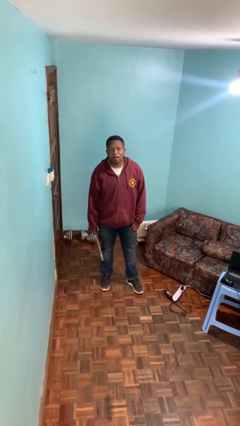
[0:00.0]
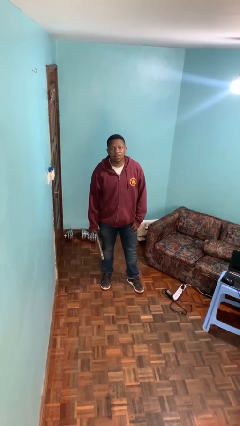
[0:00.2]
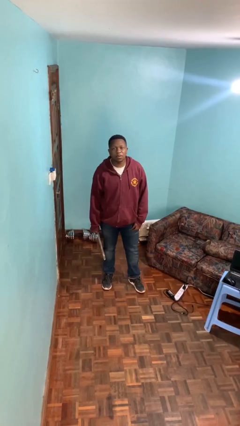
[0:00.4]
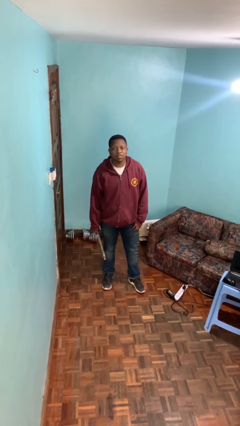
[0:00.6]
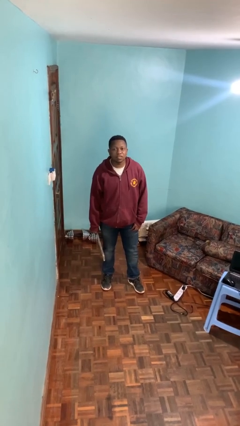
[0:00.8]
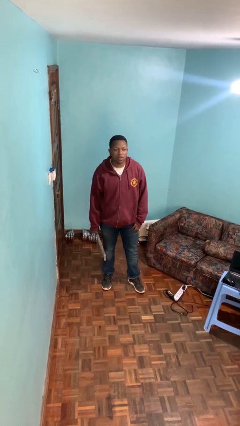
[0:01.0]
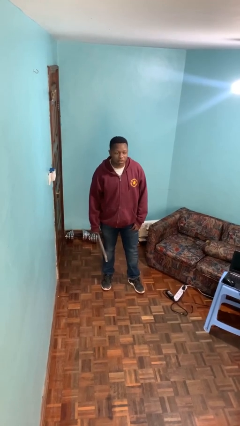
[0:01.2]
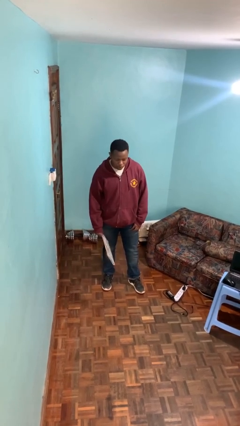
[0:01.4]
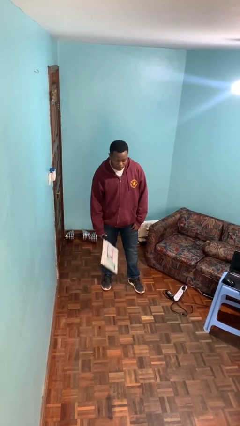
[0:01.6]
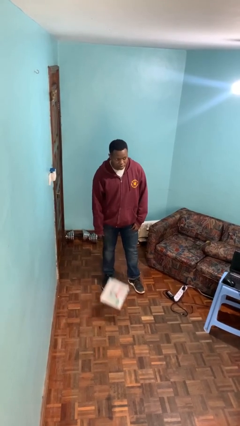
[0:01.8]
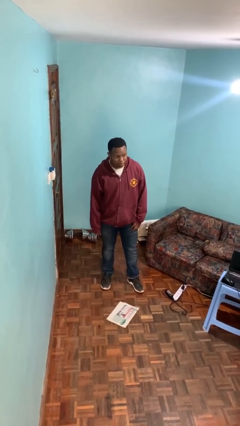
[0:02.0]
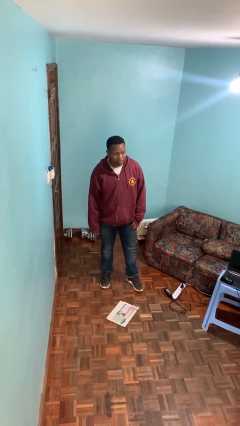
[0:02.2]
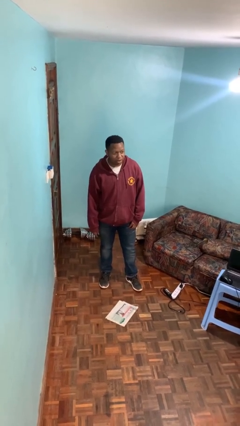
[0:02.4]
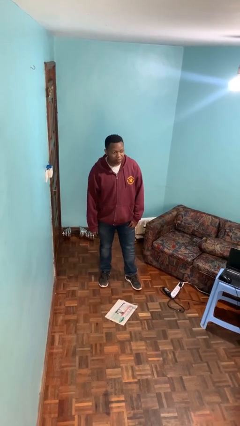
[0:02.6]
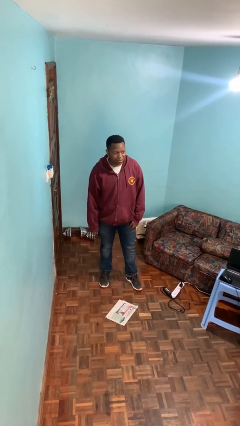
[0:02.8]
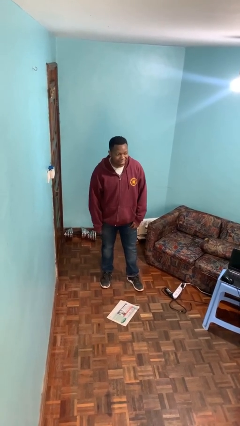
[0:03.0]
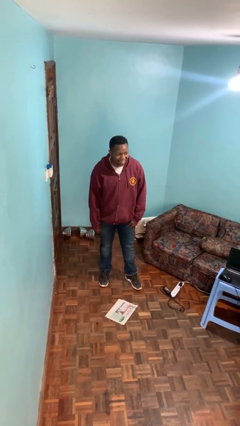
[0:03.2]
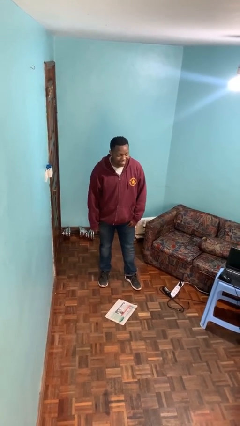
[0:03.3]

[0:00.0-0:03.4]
person drops object

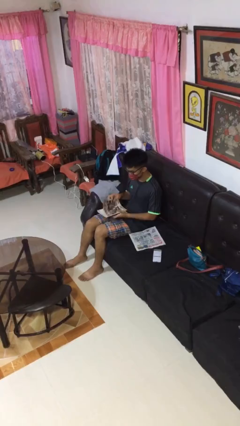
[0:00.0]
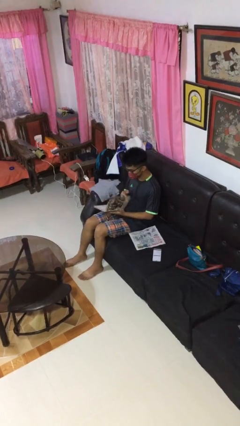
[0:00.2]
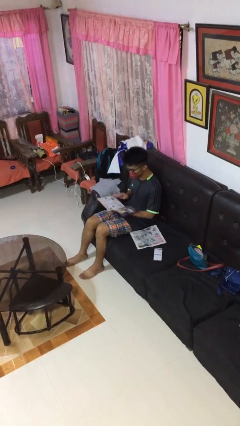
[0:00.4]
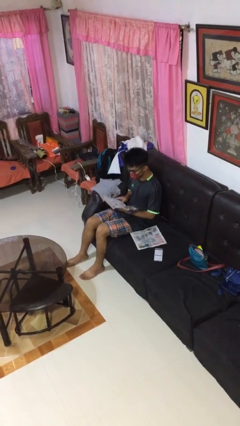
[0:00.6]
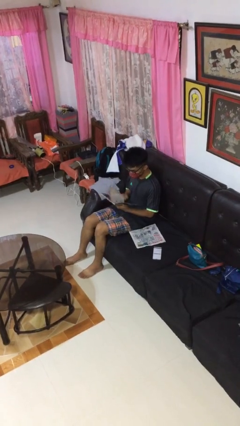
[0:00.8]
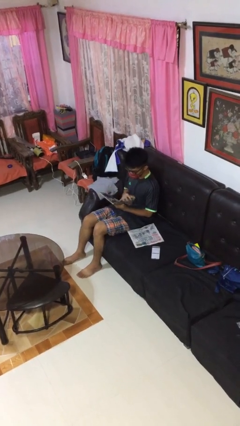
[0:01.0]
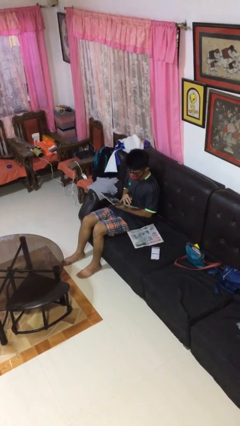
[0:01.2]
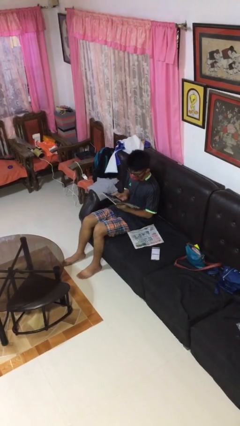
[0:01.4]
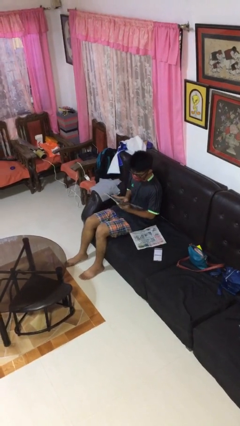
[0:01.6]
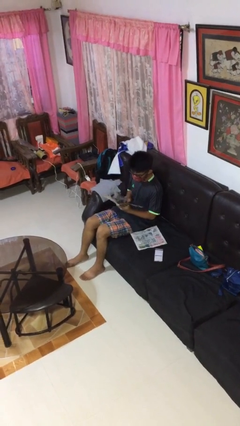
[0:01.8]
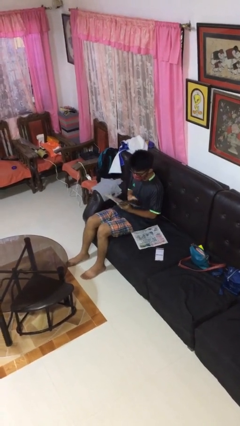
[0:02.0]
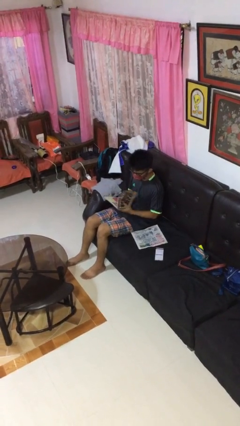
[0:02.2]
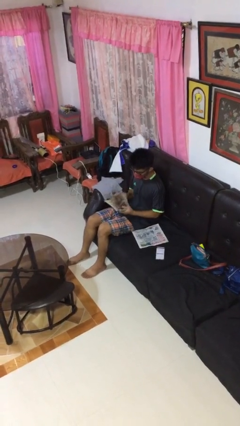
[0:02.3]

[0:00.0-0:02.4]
person reads magazine

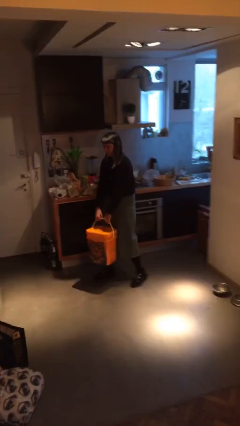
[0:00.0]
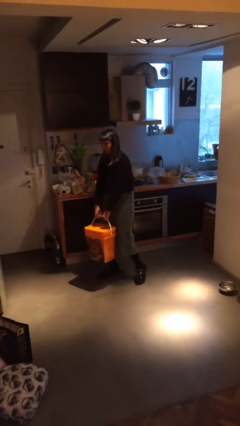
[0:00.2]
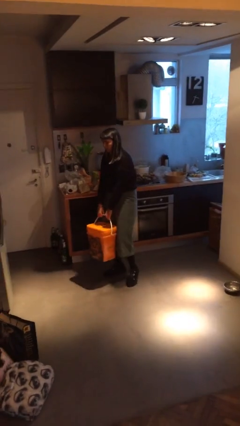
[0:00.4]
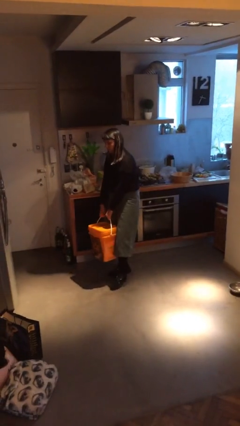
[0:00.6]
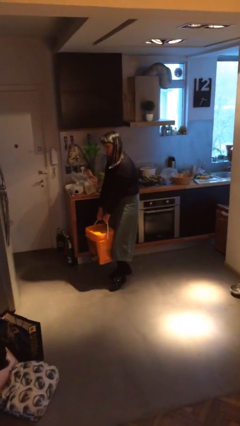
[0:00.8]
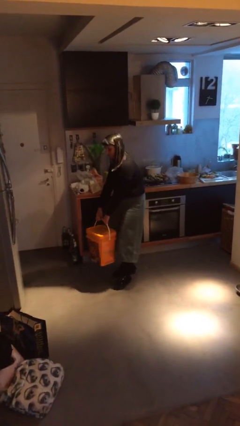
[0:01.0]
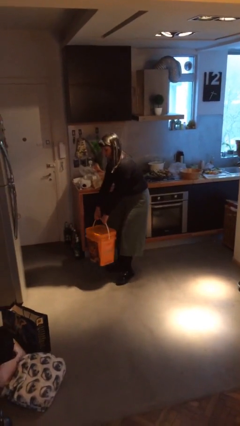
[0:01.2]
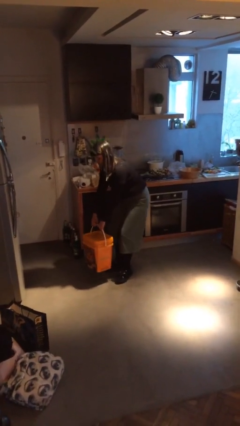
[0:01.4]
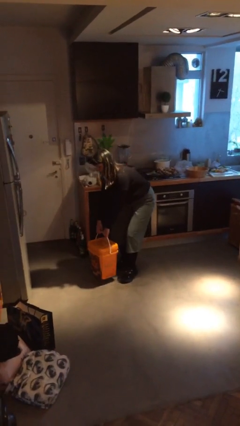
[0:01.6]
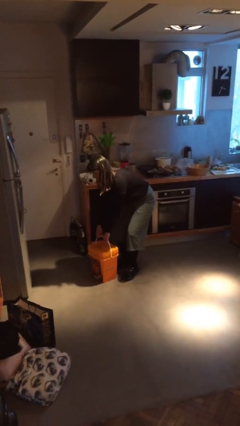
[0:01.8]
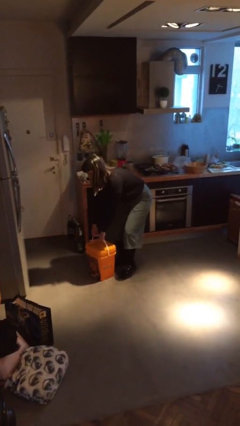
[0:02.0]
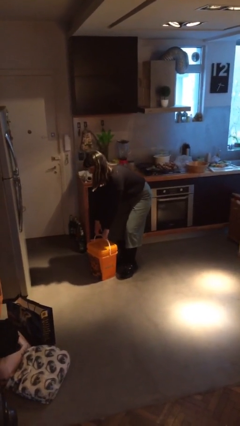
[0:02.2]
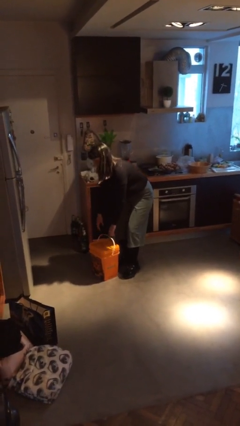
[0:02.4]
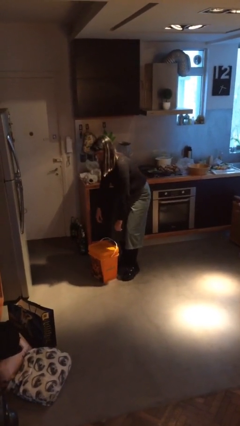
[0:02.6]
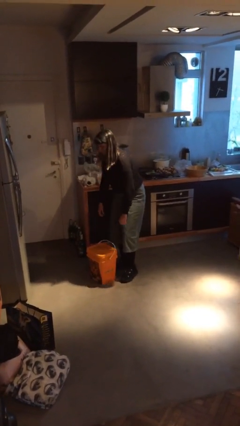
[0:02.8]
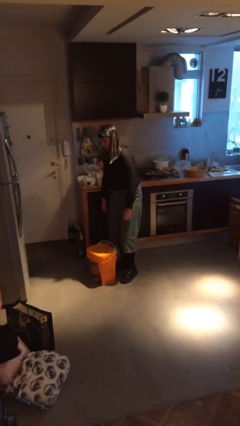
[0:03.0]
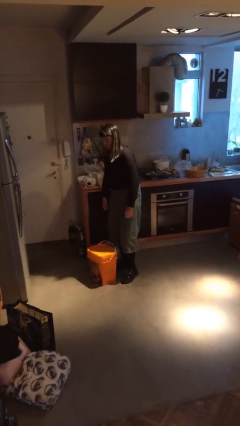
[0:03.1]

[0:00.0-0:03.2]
person puts down object on floor

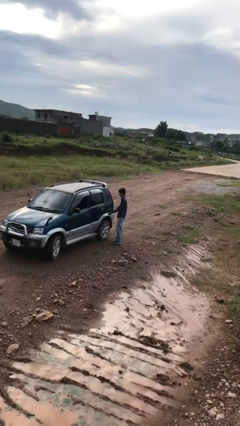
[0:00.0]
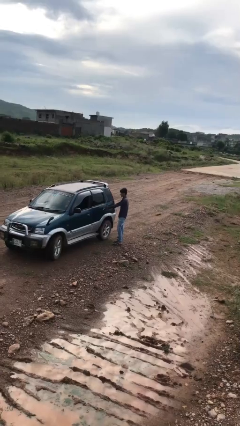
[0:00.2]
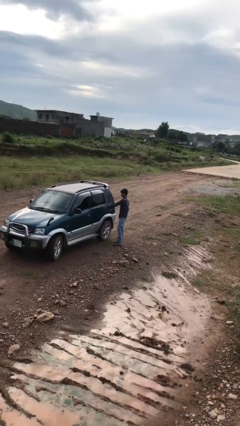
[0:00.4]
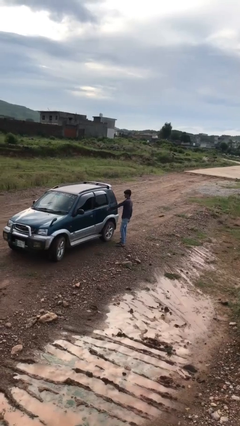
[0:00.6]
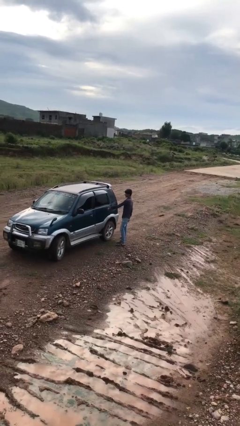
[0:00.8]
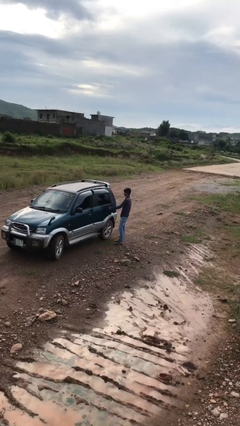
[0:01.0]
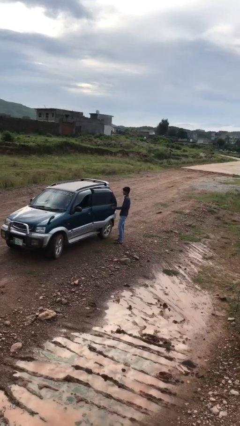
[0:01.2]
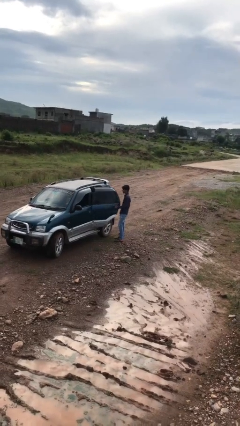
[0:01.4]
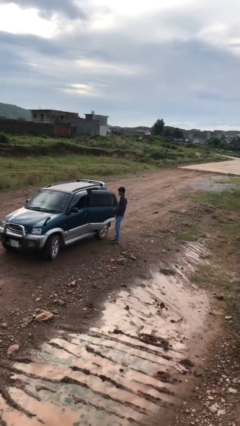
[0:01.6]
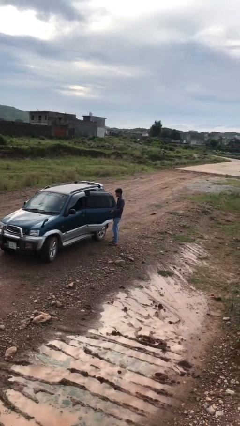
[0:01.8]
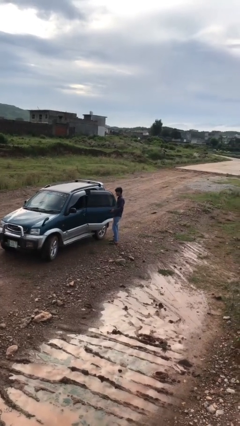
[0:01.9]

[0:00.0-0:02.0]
person opens car door

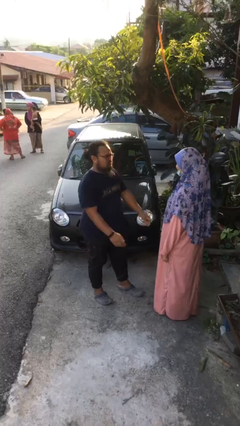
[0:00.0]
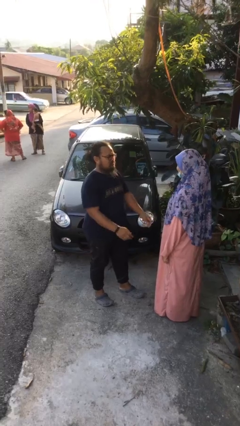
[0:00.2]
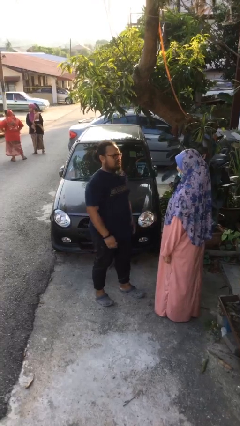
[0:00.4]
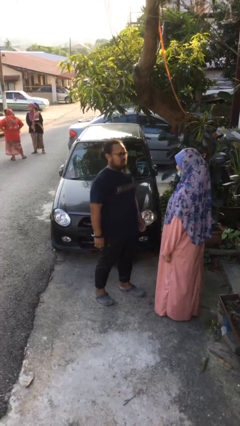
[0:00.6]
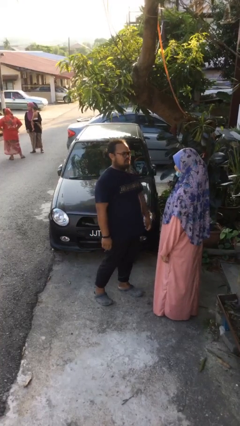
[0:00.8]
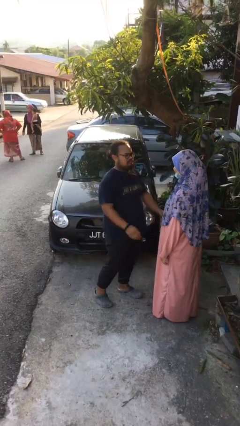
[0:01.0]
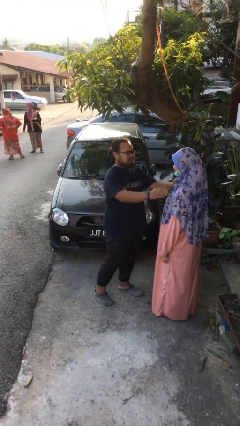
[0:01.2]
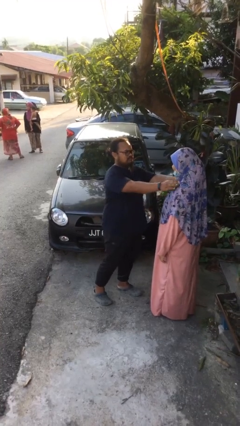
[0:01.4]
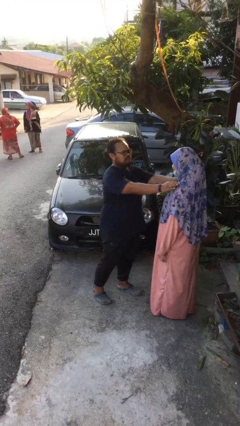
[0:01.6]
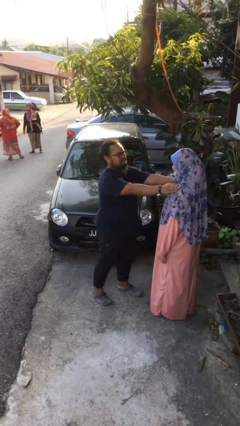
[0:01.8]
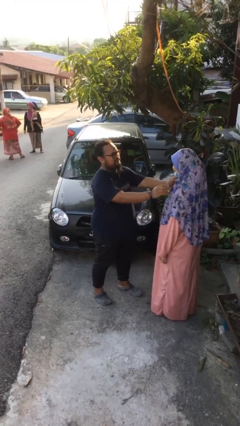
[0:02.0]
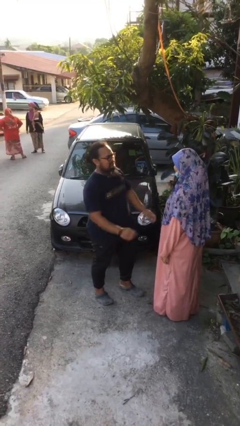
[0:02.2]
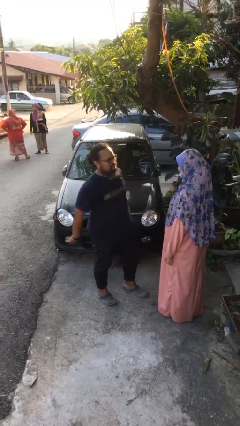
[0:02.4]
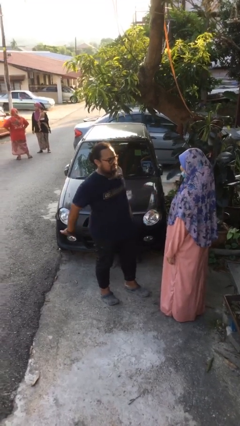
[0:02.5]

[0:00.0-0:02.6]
person pounds shoulders of person

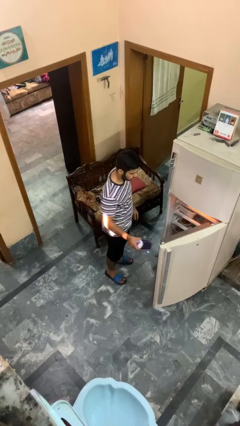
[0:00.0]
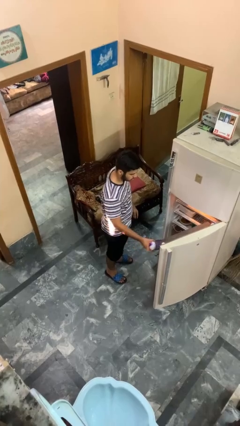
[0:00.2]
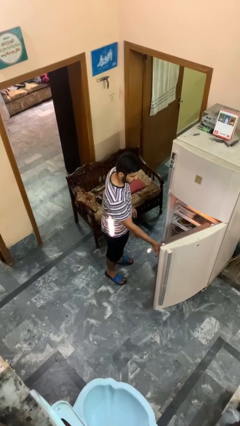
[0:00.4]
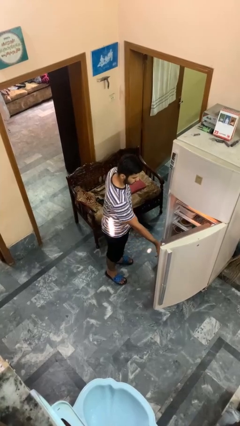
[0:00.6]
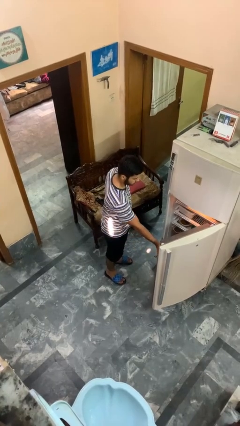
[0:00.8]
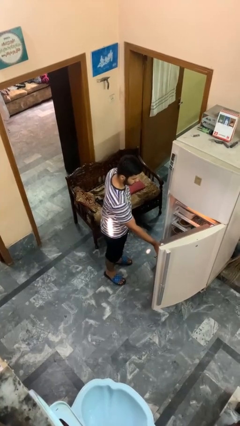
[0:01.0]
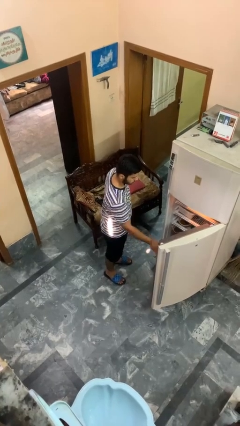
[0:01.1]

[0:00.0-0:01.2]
person puts object into refrigerator

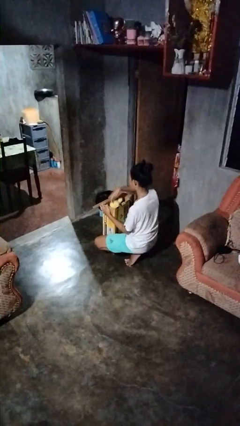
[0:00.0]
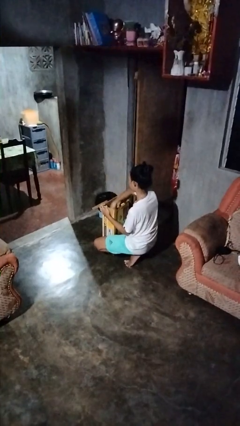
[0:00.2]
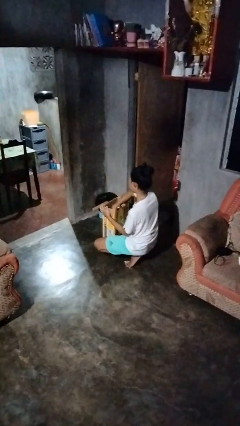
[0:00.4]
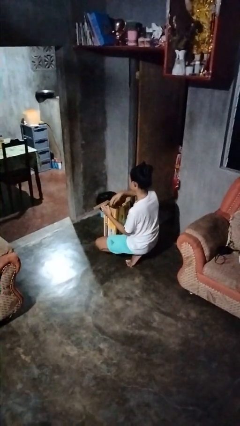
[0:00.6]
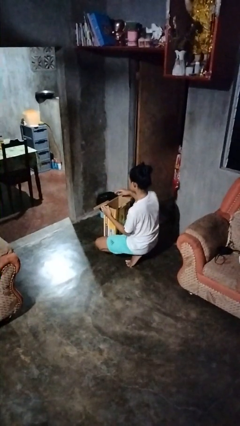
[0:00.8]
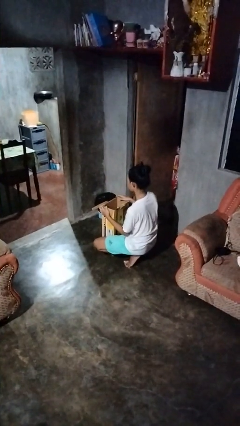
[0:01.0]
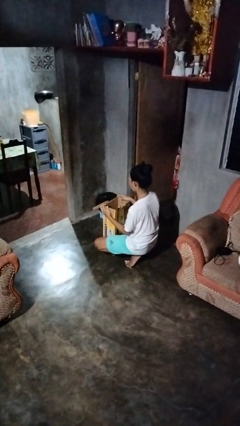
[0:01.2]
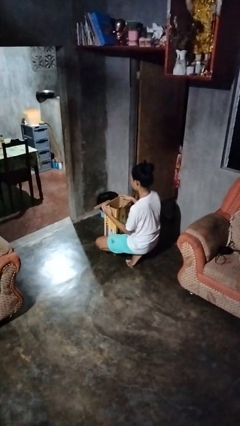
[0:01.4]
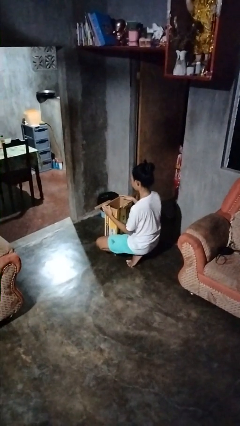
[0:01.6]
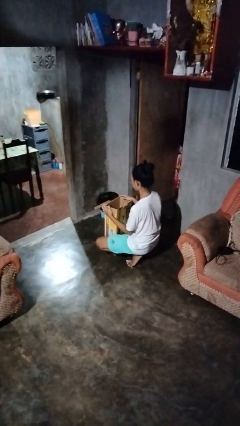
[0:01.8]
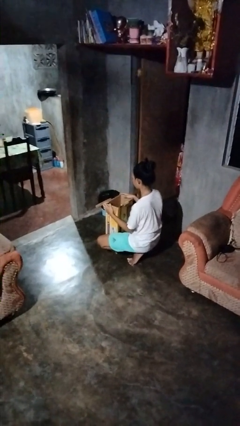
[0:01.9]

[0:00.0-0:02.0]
person puts object into box
